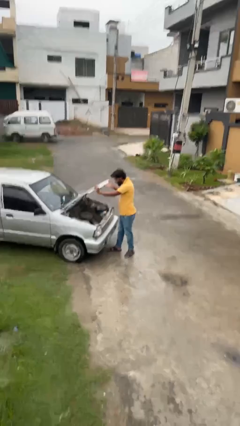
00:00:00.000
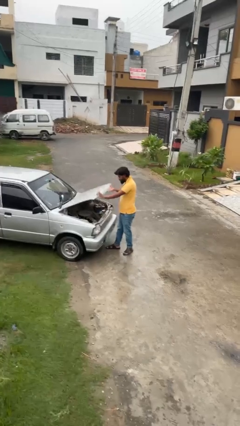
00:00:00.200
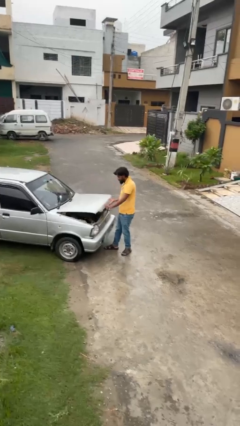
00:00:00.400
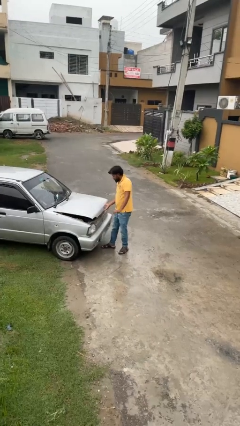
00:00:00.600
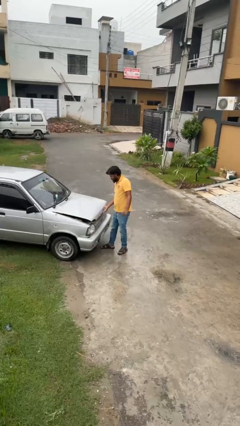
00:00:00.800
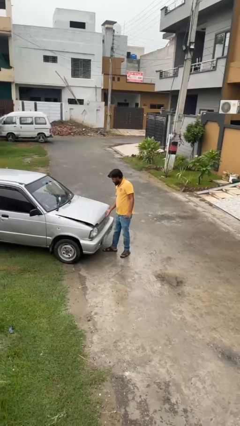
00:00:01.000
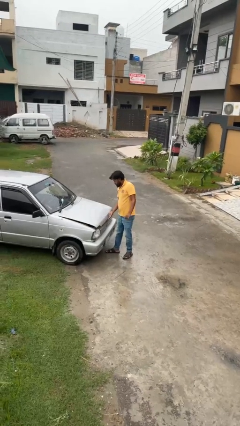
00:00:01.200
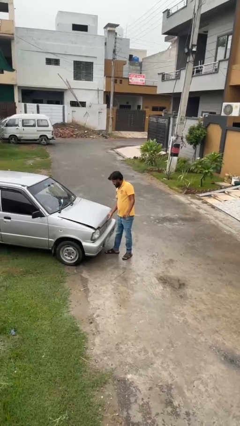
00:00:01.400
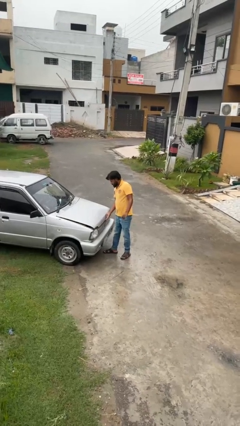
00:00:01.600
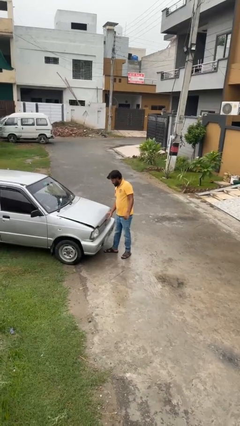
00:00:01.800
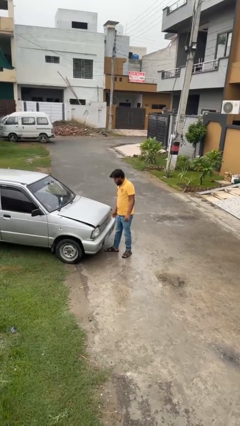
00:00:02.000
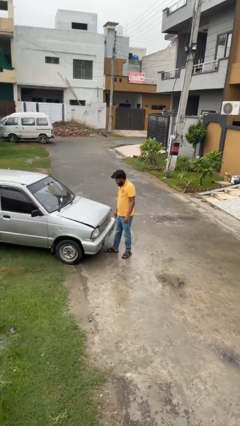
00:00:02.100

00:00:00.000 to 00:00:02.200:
person closes car hood

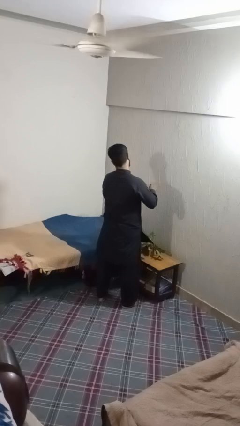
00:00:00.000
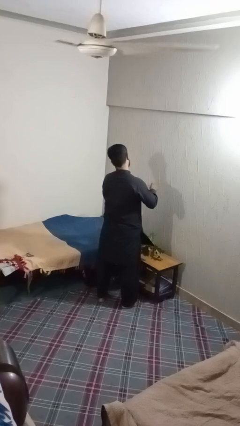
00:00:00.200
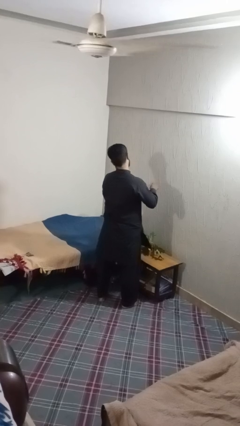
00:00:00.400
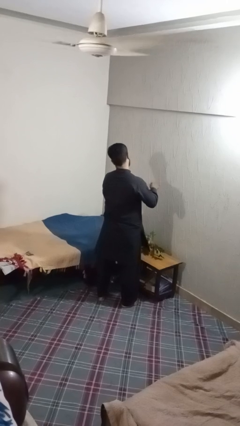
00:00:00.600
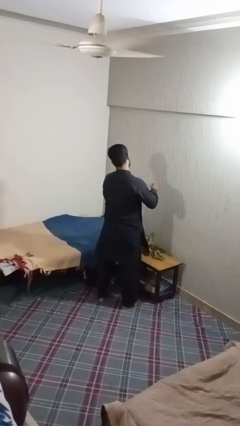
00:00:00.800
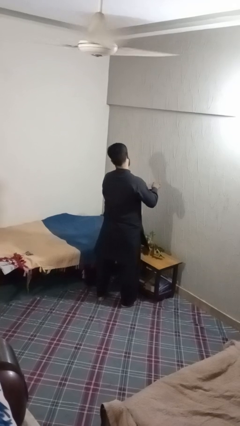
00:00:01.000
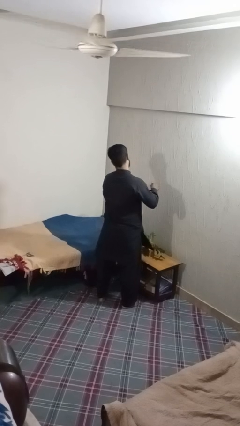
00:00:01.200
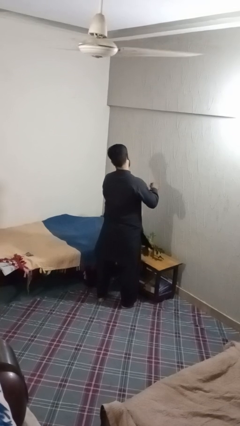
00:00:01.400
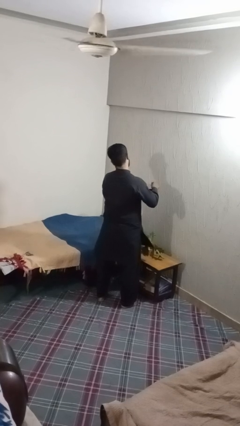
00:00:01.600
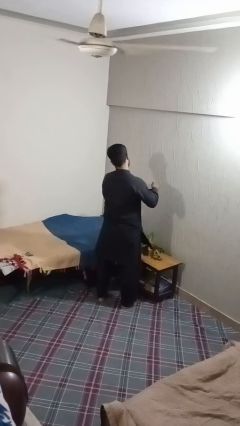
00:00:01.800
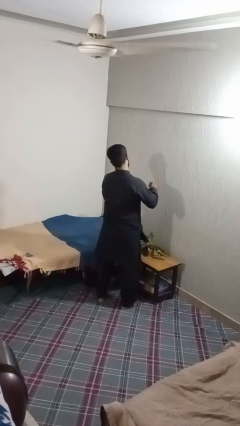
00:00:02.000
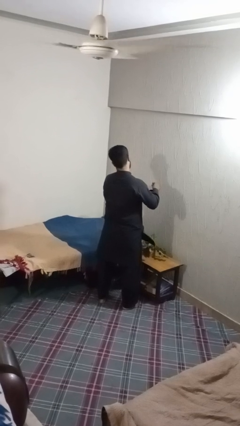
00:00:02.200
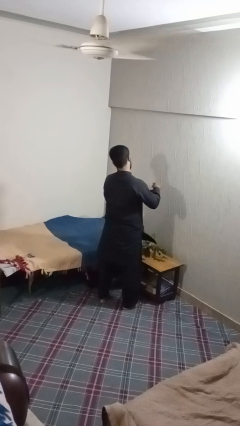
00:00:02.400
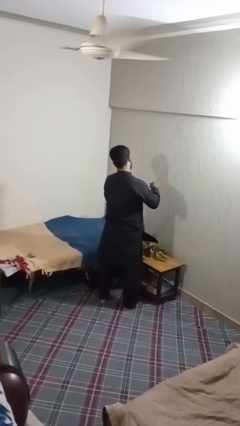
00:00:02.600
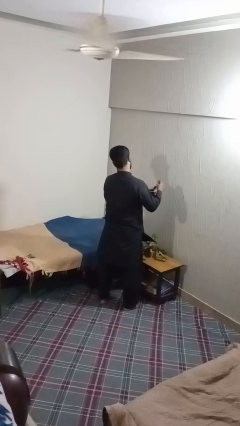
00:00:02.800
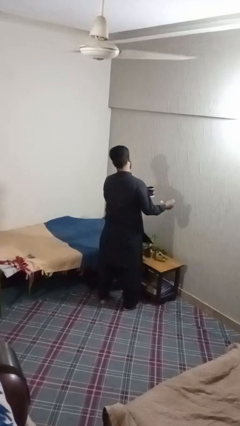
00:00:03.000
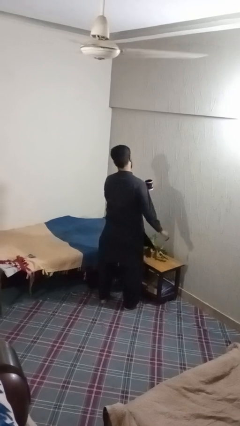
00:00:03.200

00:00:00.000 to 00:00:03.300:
person stirs mug

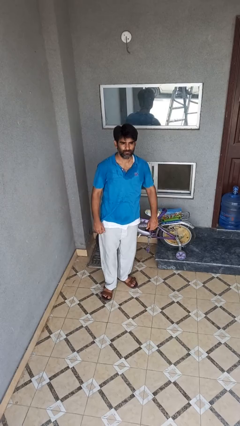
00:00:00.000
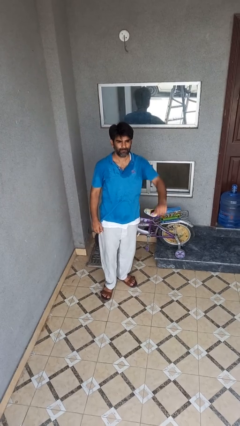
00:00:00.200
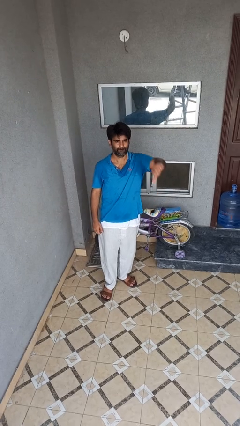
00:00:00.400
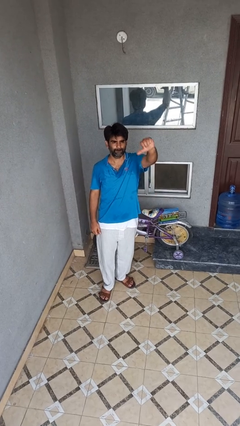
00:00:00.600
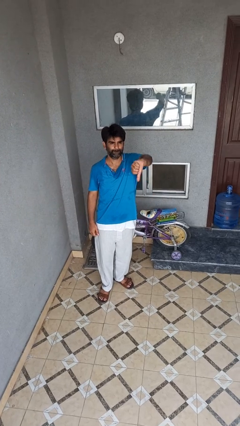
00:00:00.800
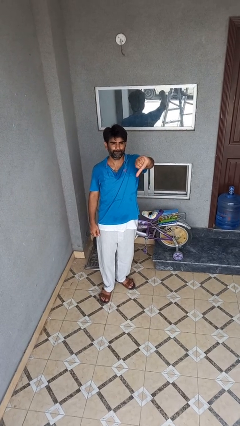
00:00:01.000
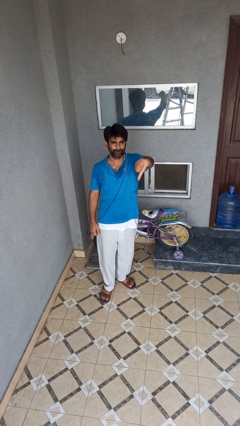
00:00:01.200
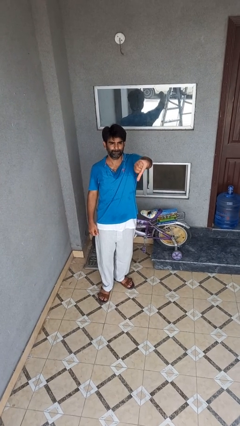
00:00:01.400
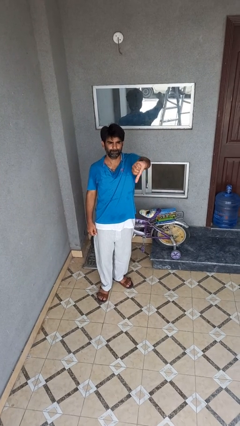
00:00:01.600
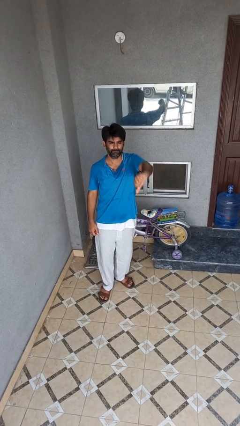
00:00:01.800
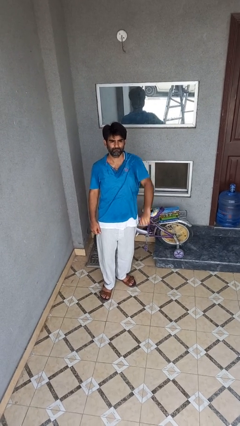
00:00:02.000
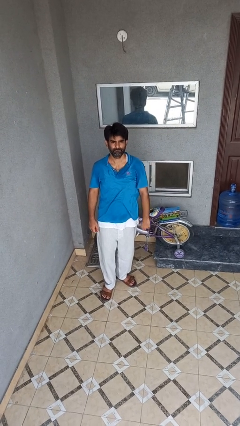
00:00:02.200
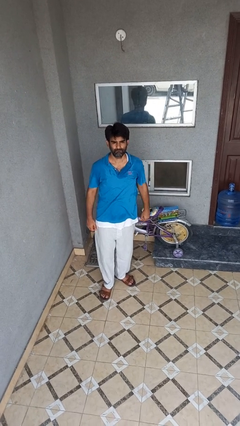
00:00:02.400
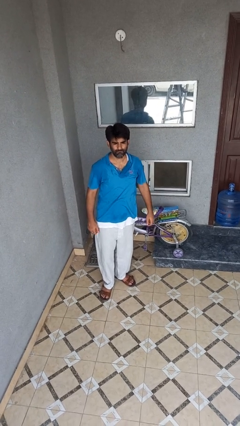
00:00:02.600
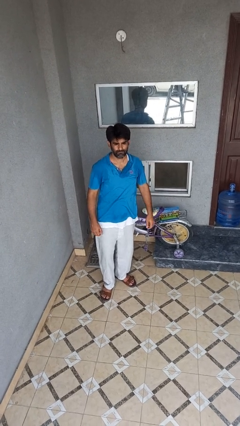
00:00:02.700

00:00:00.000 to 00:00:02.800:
person gestures thumbs down

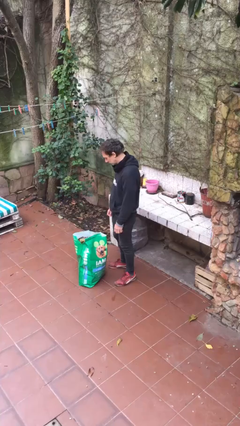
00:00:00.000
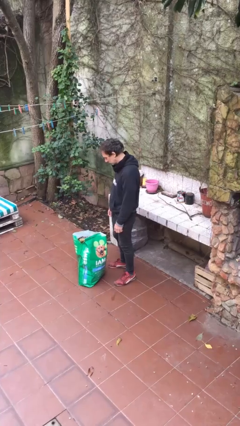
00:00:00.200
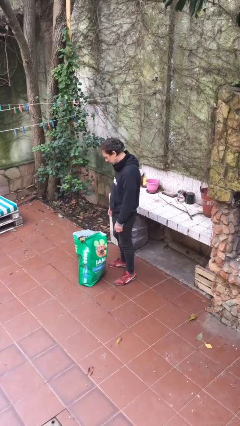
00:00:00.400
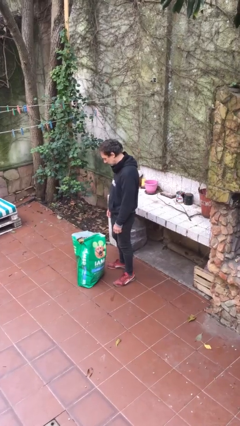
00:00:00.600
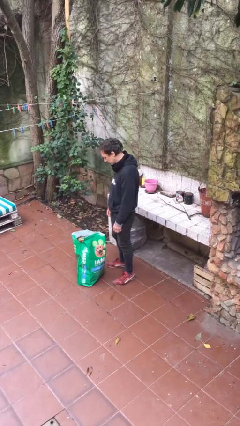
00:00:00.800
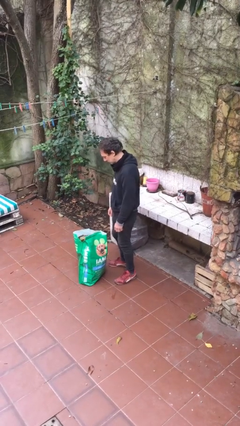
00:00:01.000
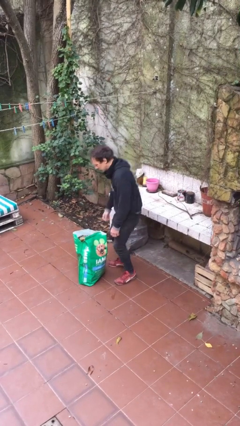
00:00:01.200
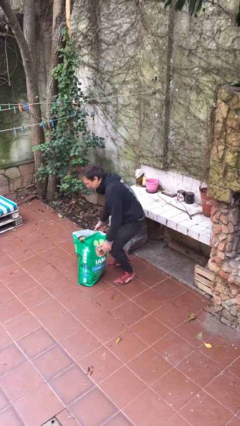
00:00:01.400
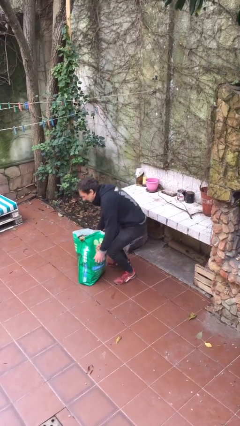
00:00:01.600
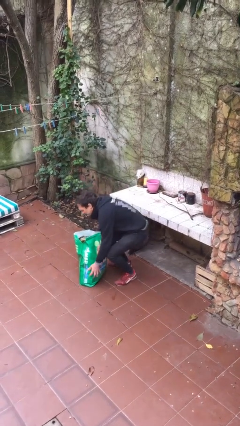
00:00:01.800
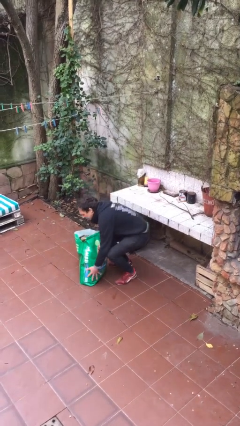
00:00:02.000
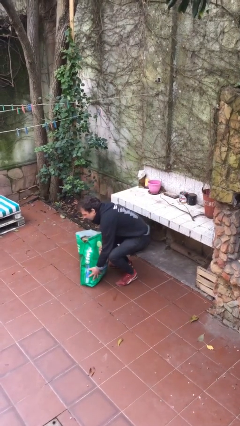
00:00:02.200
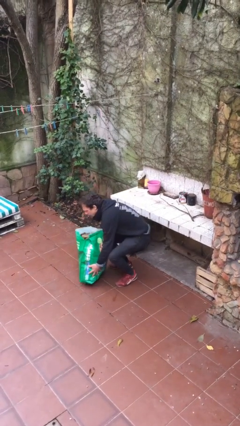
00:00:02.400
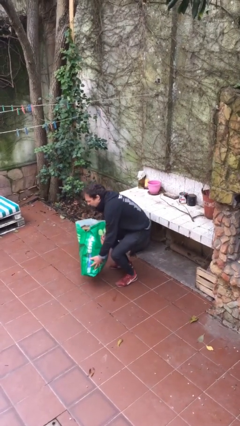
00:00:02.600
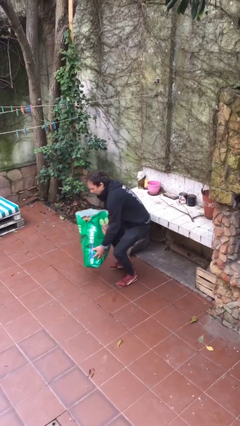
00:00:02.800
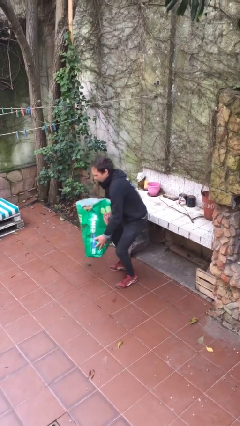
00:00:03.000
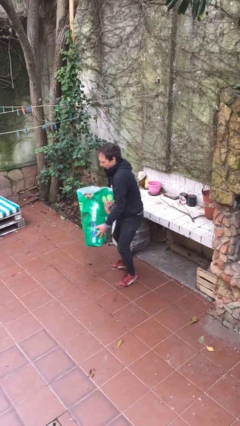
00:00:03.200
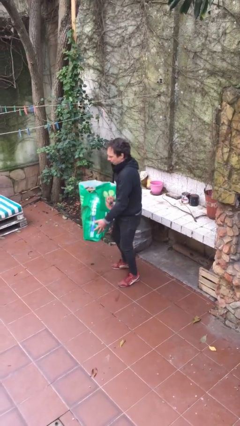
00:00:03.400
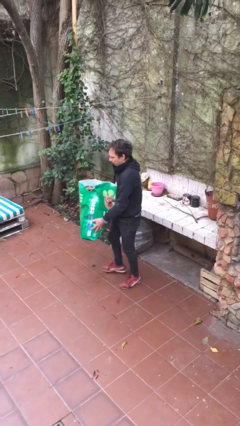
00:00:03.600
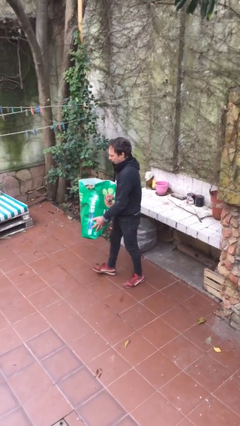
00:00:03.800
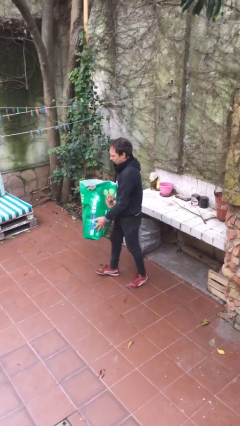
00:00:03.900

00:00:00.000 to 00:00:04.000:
person picks up object from floor

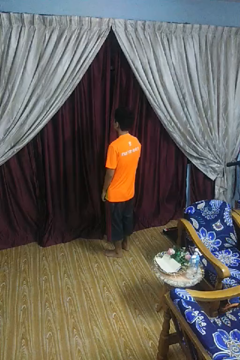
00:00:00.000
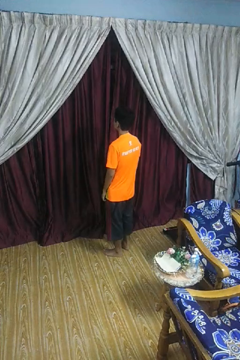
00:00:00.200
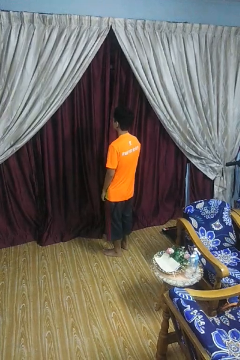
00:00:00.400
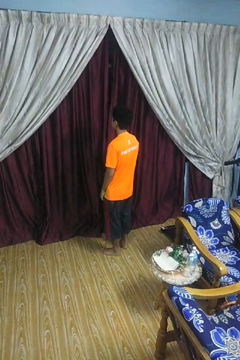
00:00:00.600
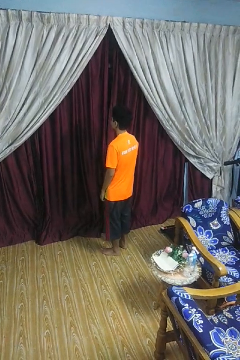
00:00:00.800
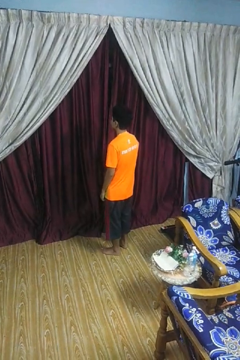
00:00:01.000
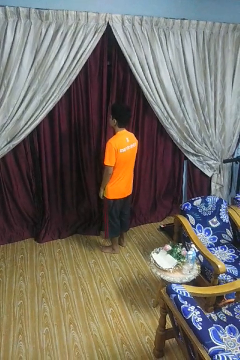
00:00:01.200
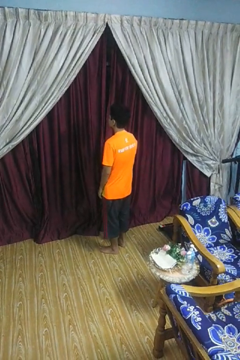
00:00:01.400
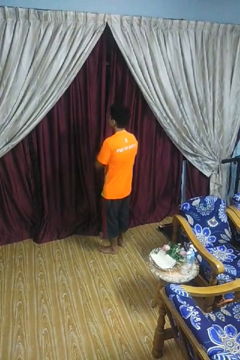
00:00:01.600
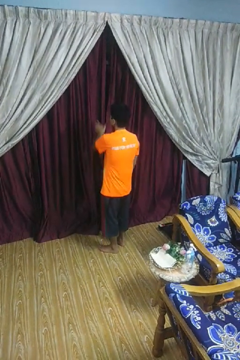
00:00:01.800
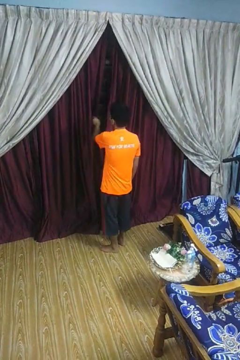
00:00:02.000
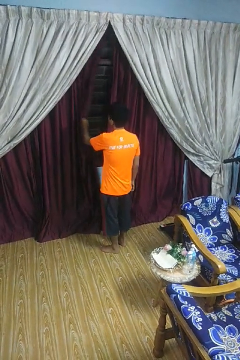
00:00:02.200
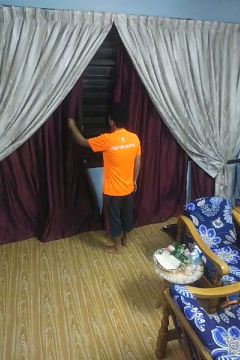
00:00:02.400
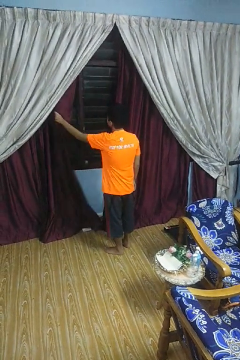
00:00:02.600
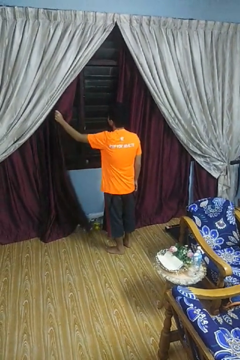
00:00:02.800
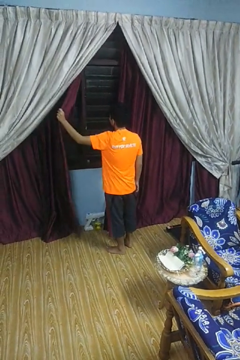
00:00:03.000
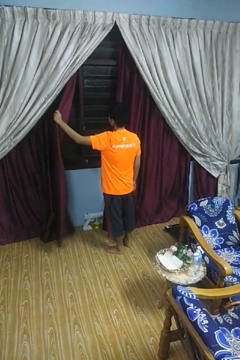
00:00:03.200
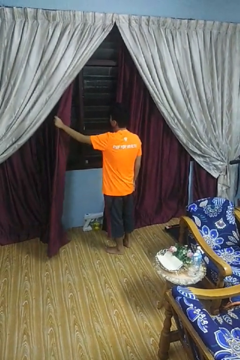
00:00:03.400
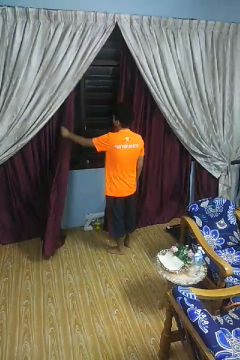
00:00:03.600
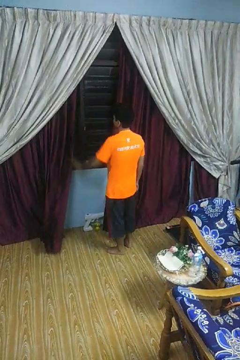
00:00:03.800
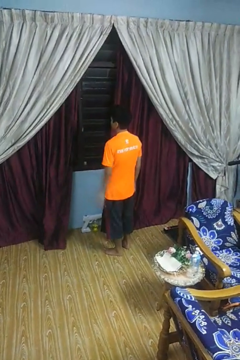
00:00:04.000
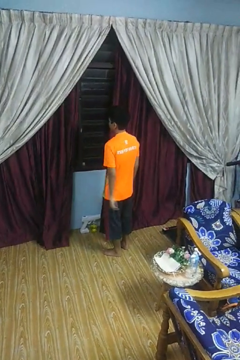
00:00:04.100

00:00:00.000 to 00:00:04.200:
person opens curtains

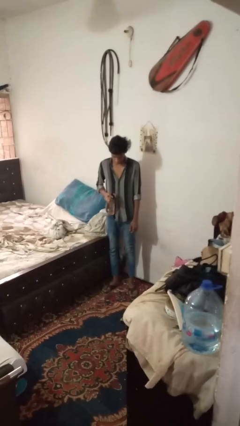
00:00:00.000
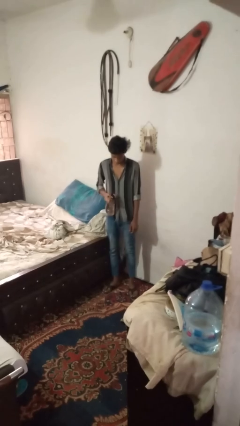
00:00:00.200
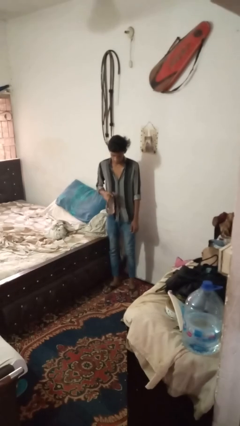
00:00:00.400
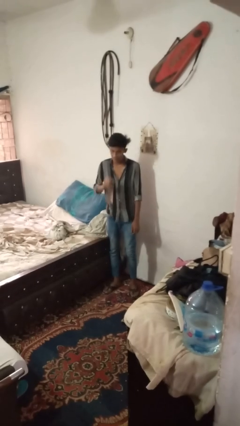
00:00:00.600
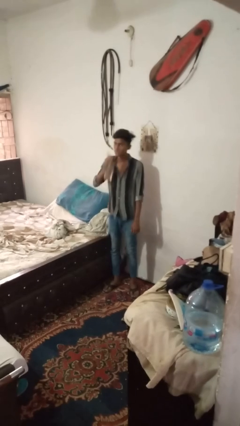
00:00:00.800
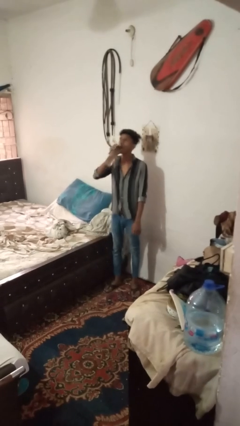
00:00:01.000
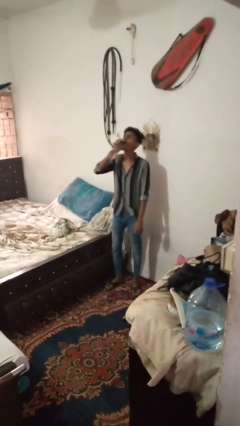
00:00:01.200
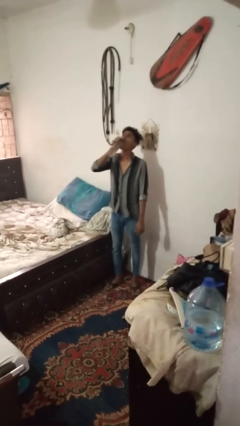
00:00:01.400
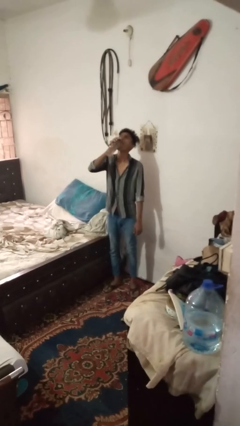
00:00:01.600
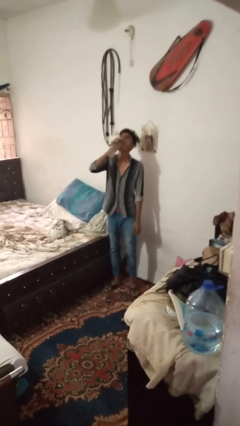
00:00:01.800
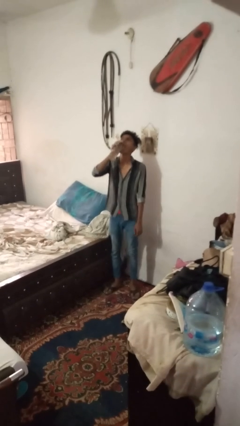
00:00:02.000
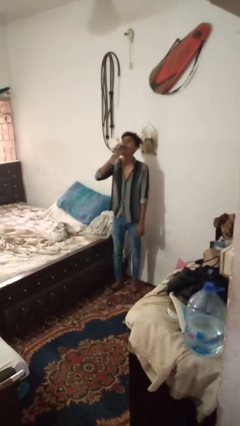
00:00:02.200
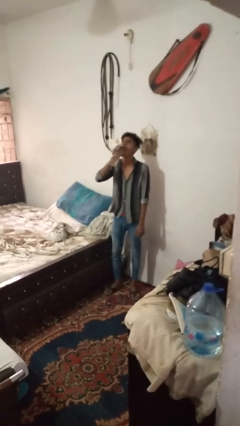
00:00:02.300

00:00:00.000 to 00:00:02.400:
person drinks from bottle
